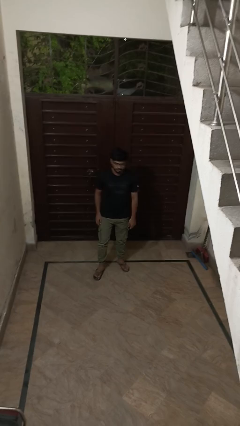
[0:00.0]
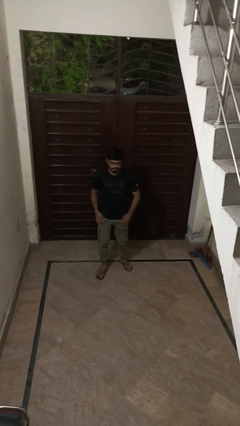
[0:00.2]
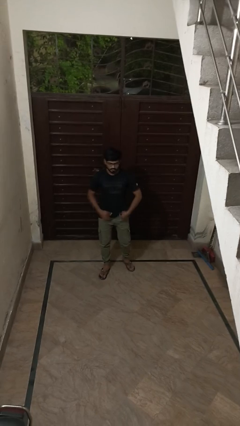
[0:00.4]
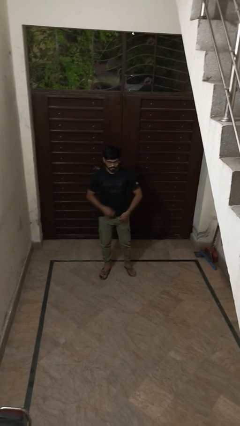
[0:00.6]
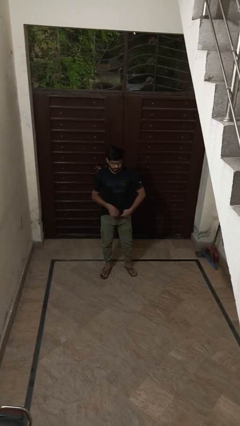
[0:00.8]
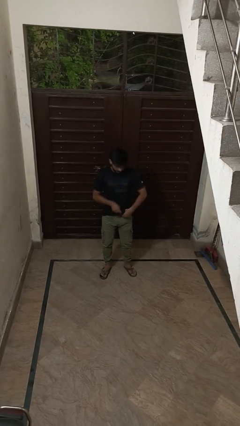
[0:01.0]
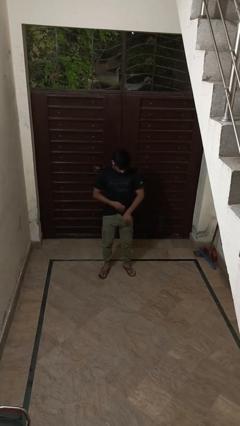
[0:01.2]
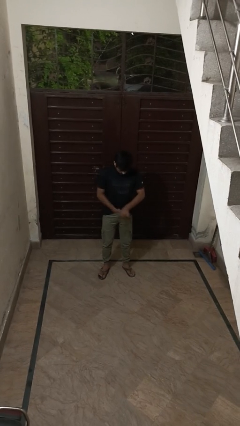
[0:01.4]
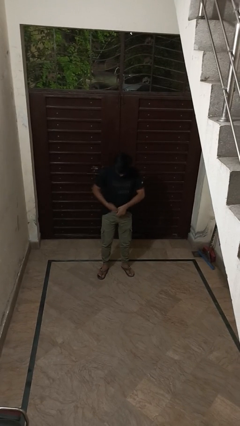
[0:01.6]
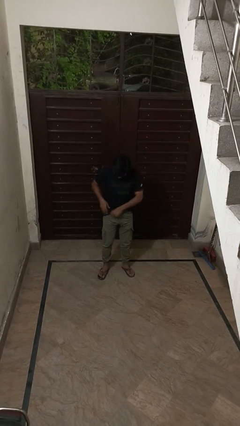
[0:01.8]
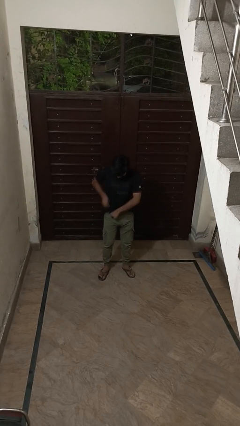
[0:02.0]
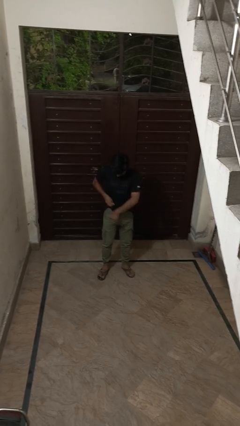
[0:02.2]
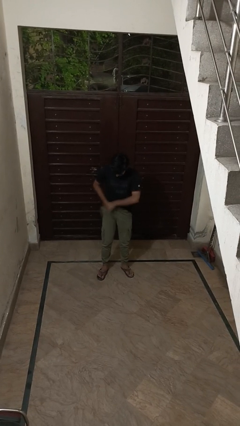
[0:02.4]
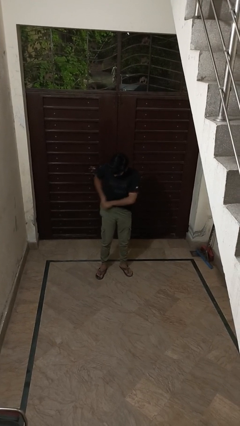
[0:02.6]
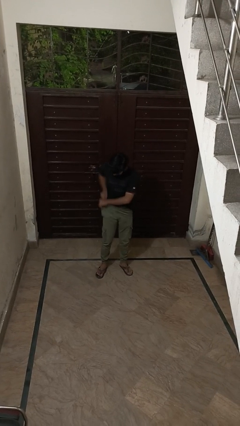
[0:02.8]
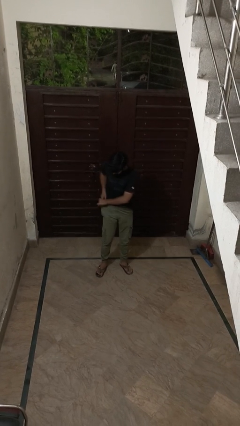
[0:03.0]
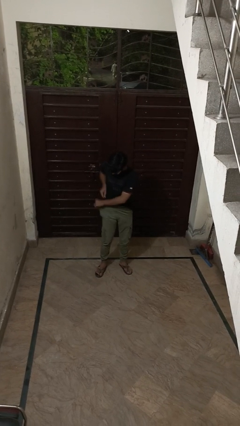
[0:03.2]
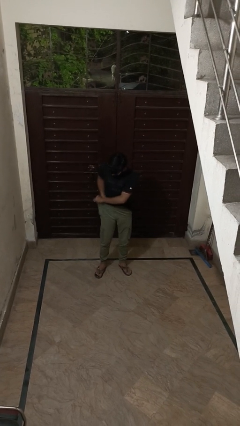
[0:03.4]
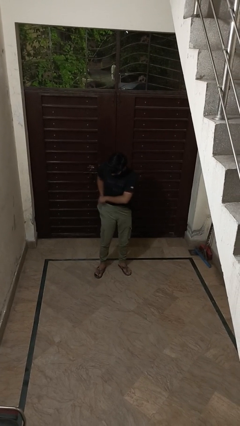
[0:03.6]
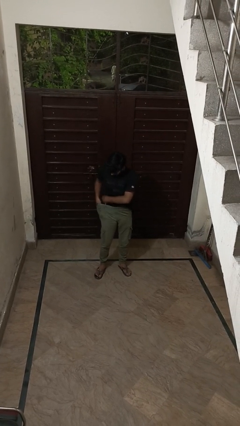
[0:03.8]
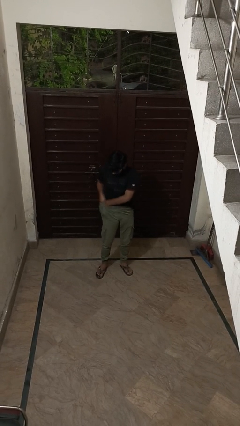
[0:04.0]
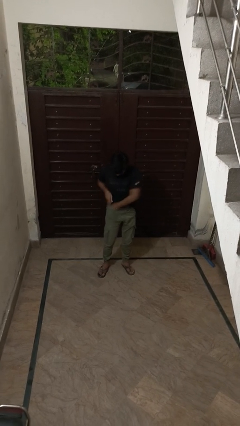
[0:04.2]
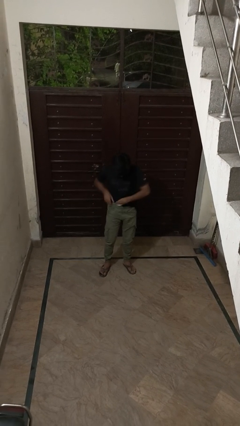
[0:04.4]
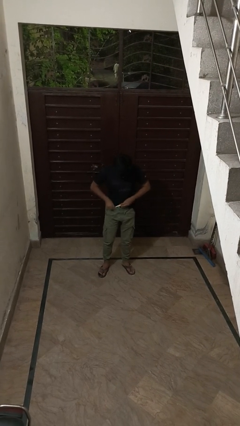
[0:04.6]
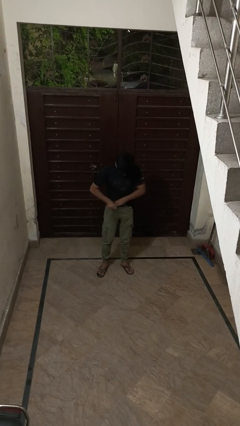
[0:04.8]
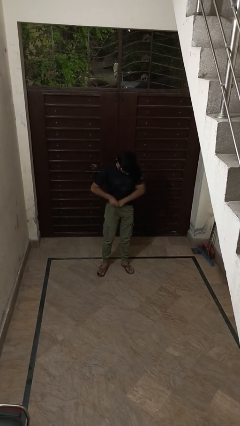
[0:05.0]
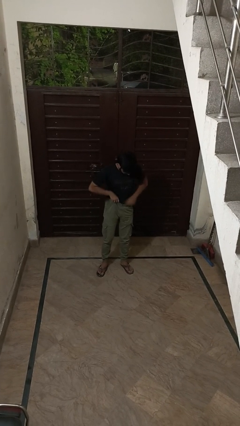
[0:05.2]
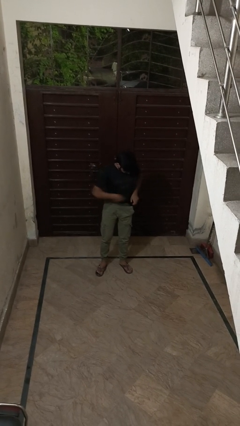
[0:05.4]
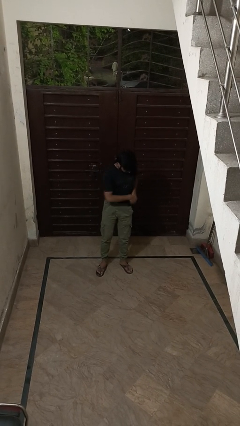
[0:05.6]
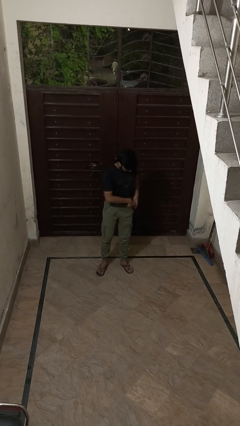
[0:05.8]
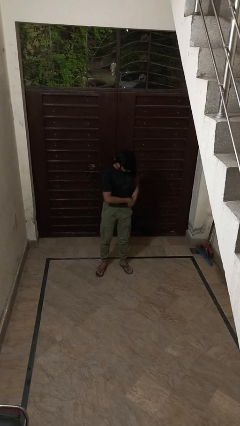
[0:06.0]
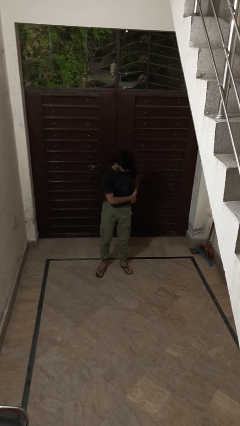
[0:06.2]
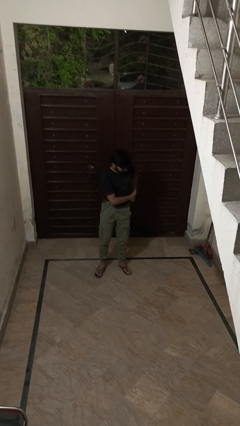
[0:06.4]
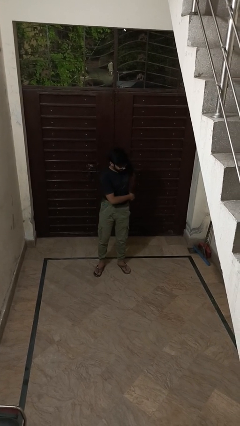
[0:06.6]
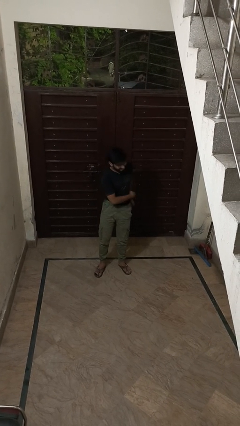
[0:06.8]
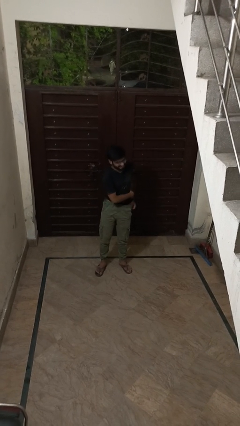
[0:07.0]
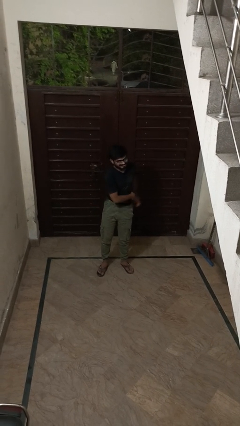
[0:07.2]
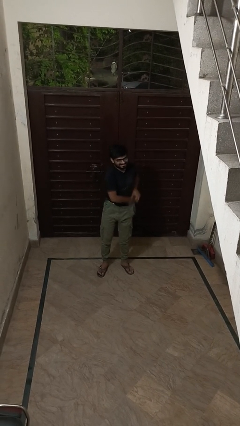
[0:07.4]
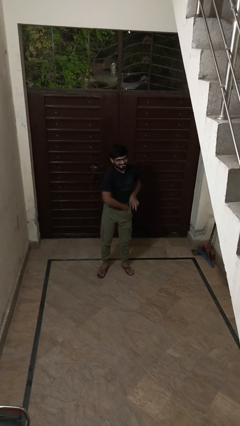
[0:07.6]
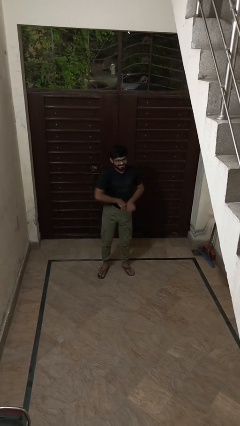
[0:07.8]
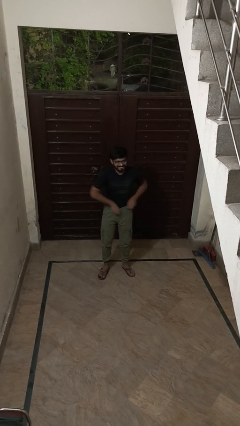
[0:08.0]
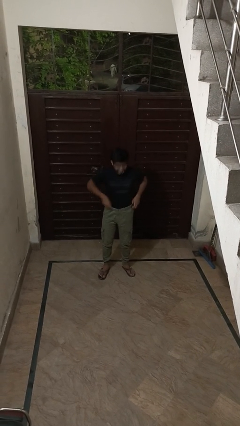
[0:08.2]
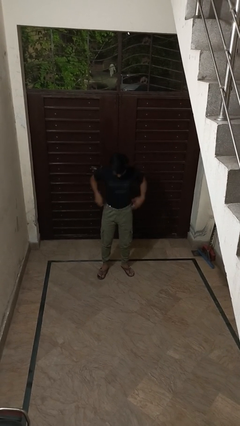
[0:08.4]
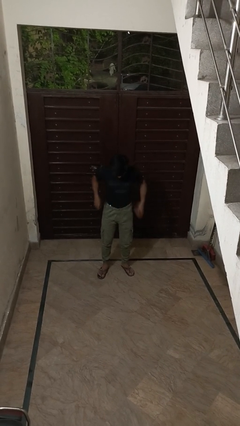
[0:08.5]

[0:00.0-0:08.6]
person tucks in shirt

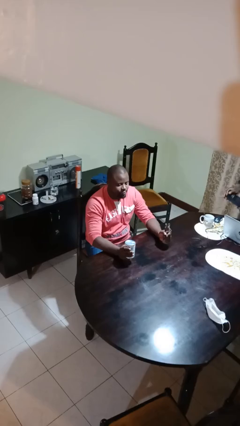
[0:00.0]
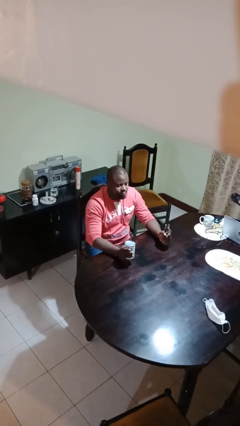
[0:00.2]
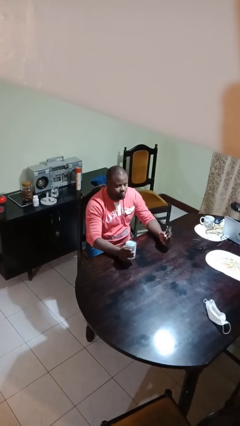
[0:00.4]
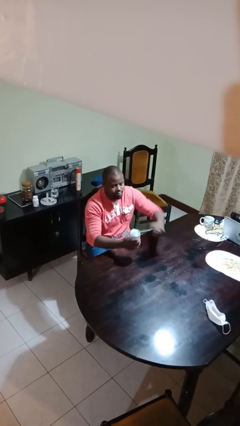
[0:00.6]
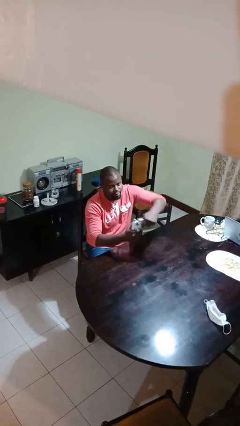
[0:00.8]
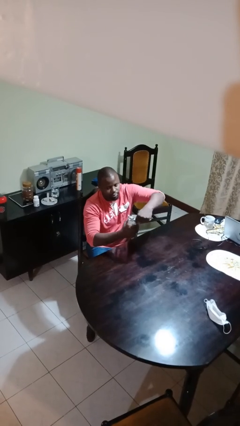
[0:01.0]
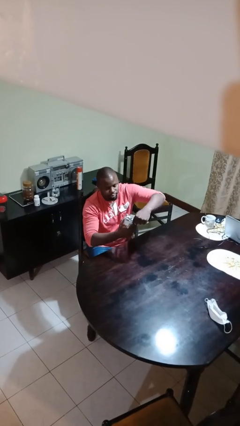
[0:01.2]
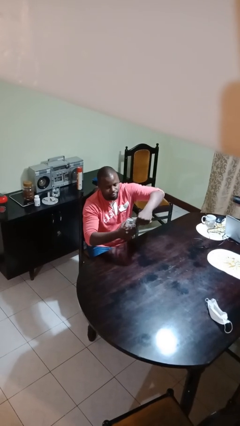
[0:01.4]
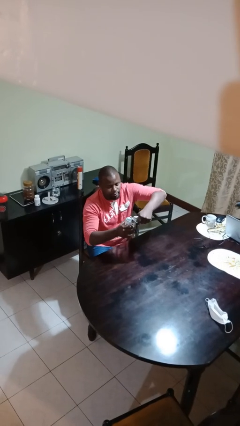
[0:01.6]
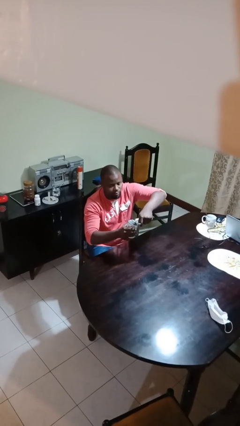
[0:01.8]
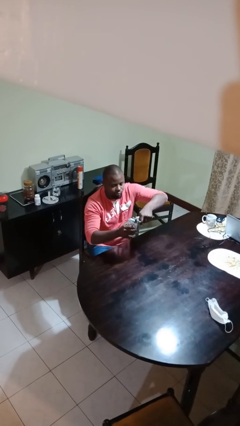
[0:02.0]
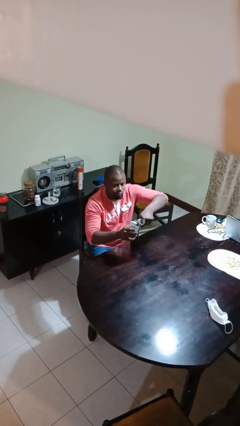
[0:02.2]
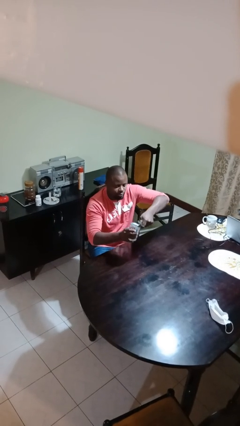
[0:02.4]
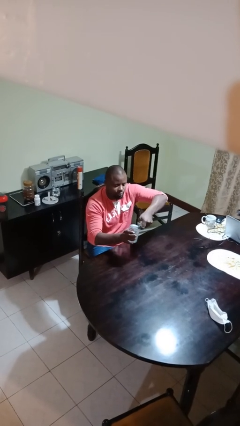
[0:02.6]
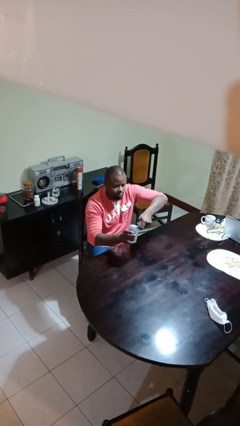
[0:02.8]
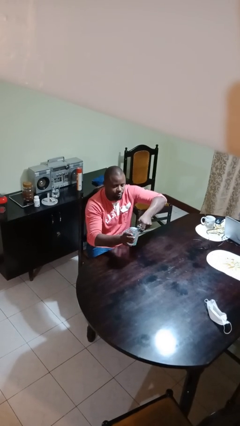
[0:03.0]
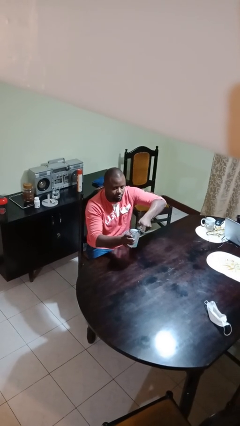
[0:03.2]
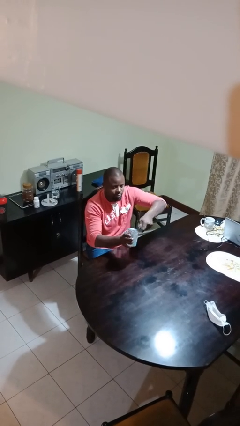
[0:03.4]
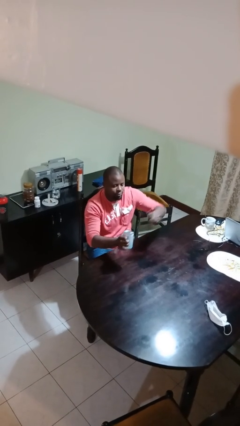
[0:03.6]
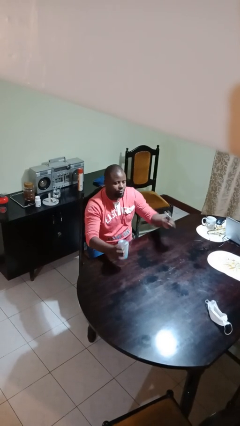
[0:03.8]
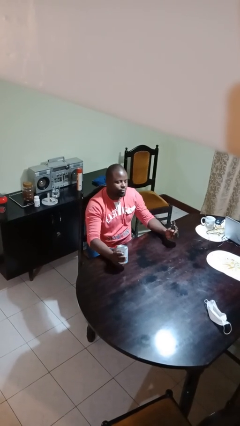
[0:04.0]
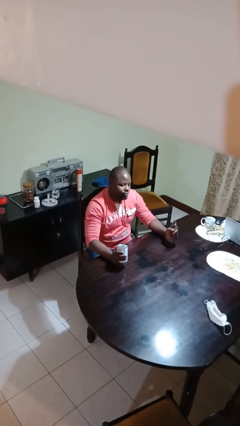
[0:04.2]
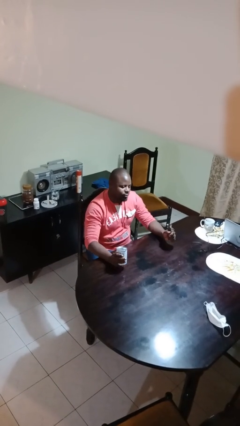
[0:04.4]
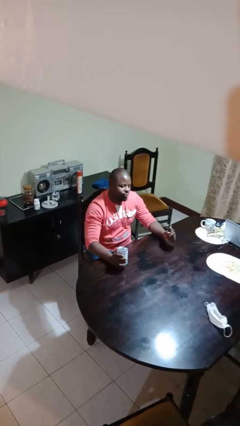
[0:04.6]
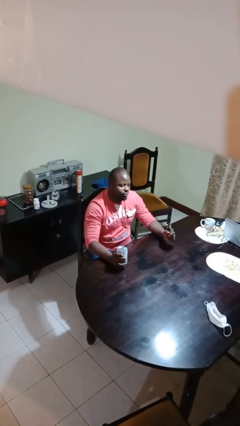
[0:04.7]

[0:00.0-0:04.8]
person opens can with can opener

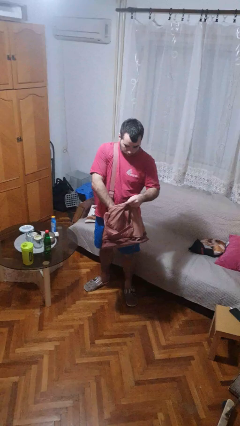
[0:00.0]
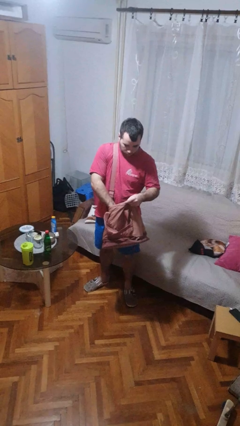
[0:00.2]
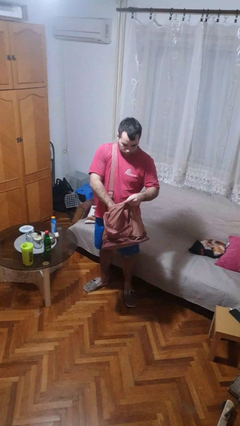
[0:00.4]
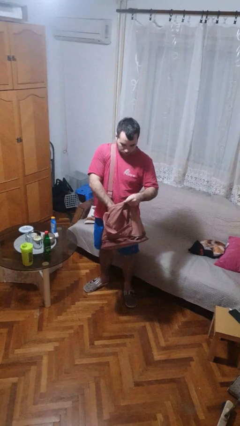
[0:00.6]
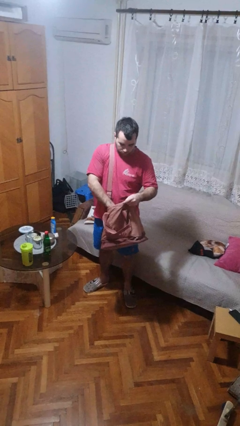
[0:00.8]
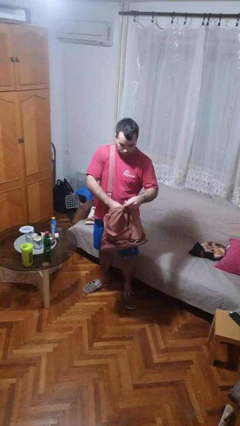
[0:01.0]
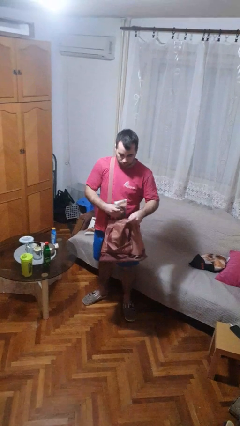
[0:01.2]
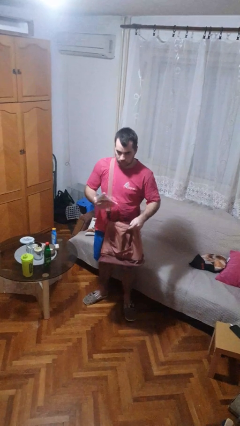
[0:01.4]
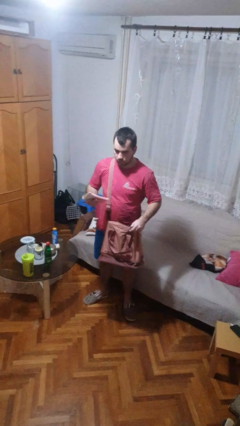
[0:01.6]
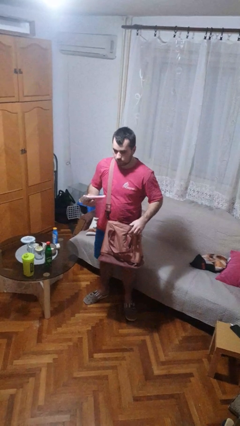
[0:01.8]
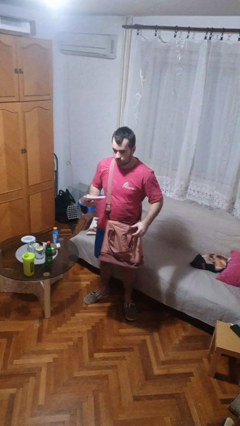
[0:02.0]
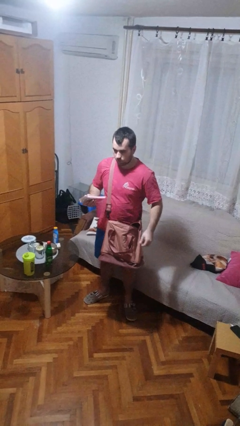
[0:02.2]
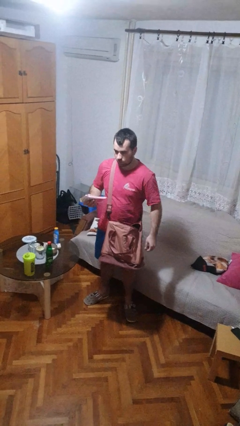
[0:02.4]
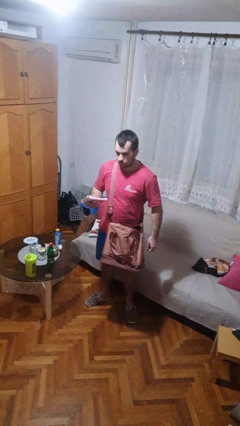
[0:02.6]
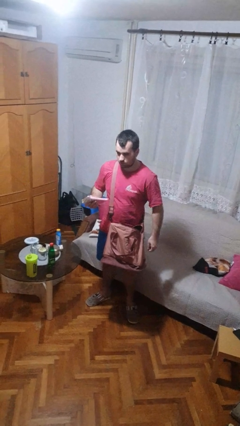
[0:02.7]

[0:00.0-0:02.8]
person takes object from purse

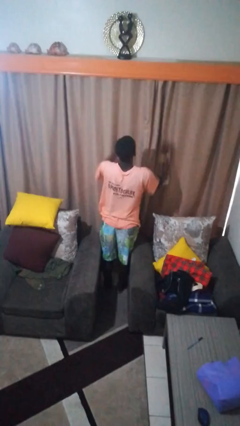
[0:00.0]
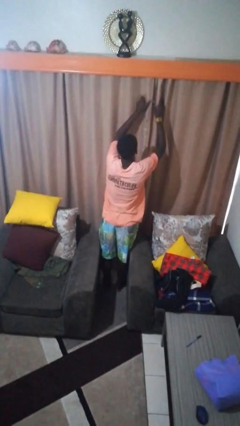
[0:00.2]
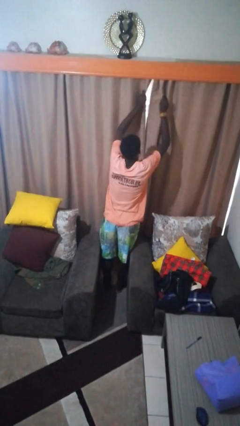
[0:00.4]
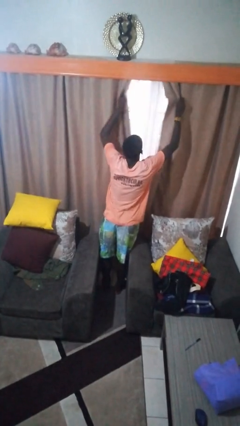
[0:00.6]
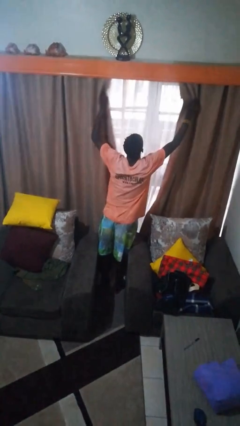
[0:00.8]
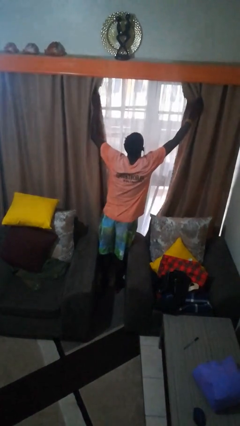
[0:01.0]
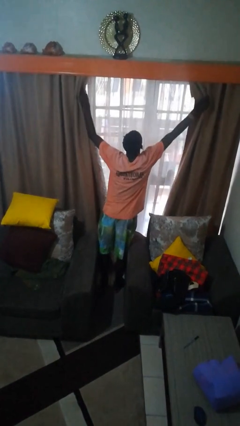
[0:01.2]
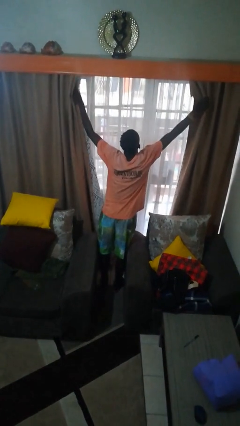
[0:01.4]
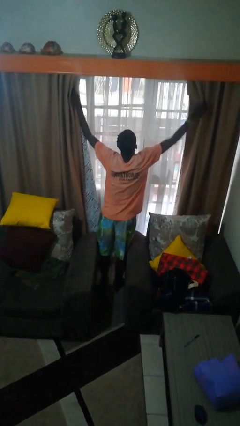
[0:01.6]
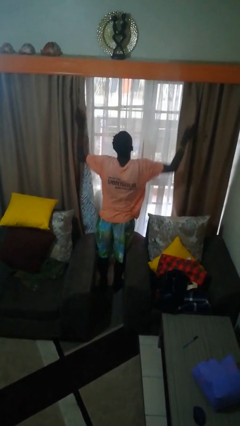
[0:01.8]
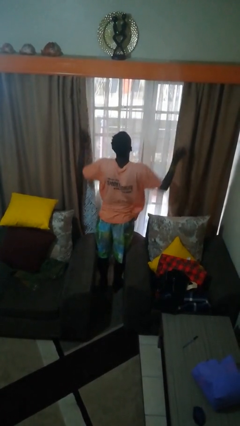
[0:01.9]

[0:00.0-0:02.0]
person opens curtains
